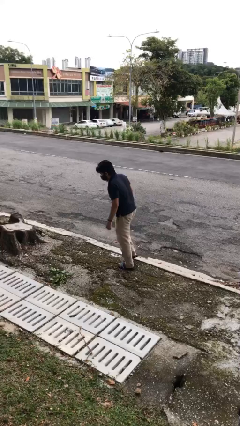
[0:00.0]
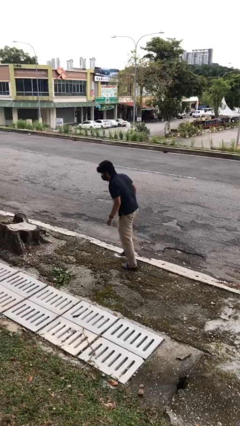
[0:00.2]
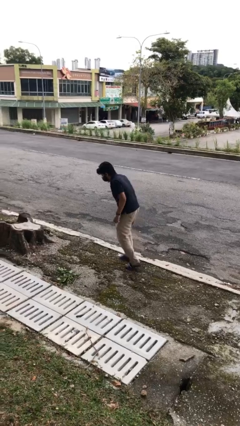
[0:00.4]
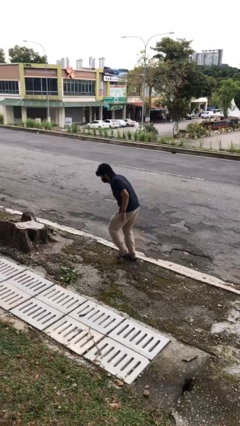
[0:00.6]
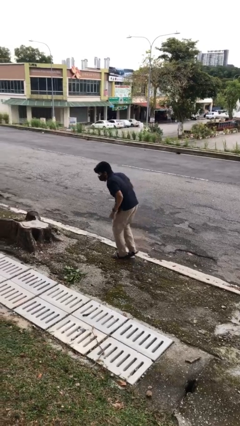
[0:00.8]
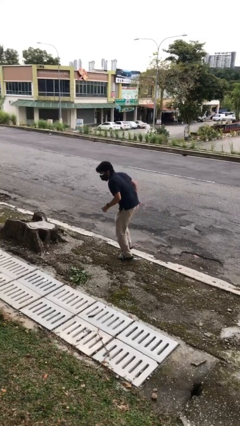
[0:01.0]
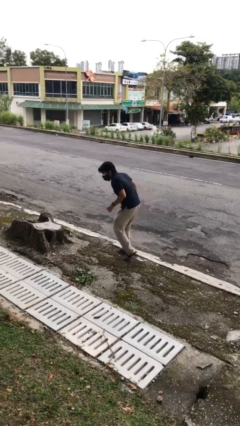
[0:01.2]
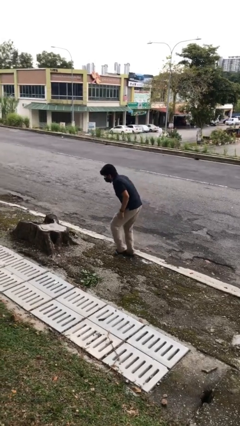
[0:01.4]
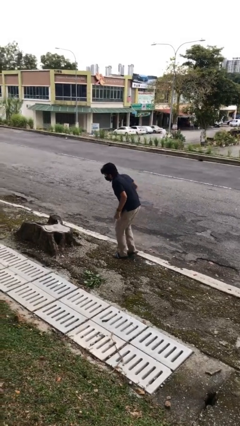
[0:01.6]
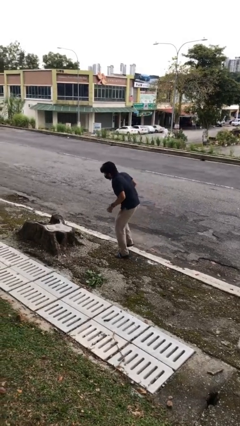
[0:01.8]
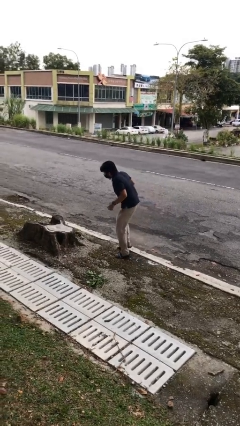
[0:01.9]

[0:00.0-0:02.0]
person walks tiptoe

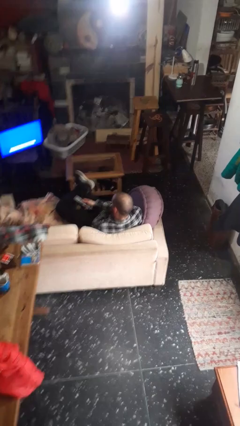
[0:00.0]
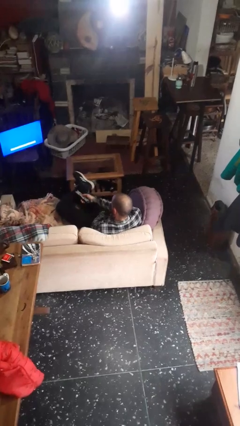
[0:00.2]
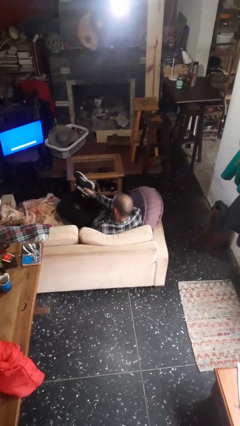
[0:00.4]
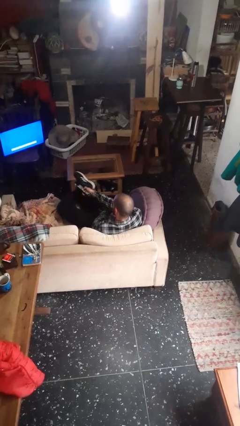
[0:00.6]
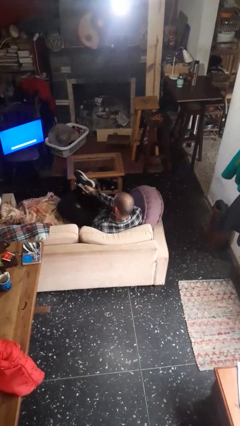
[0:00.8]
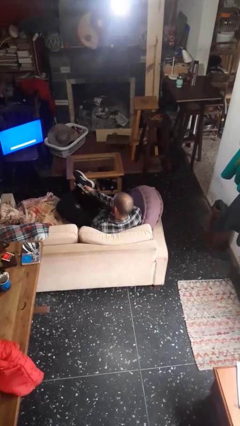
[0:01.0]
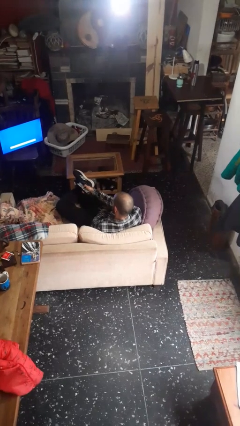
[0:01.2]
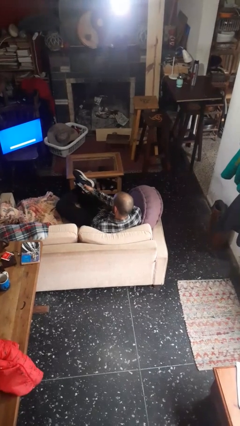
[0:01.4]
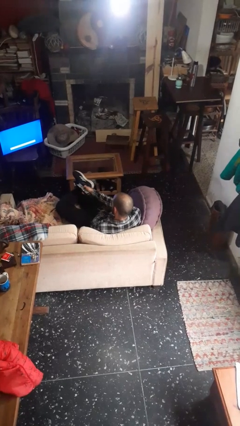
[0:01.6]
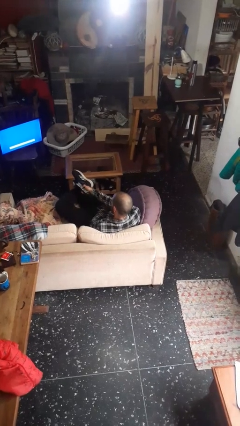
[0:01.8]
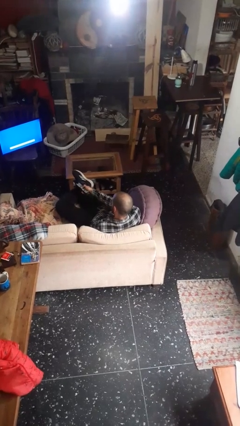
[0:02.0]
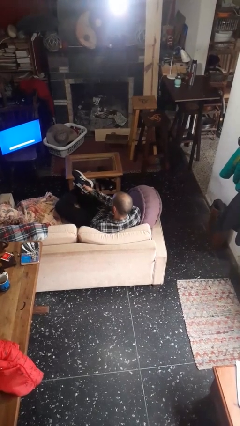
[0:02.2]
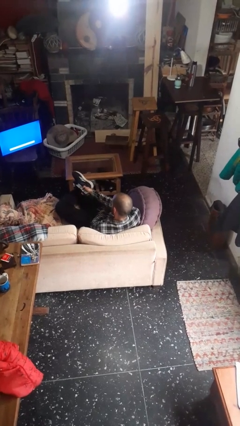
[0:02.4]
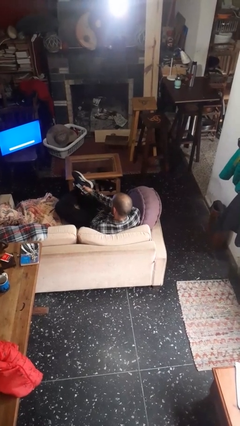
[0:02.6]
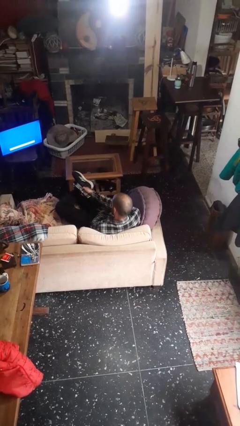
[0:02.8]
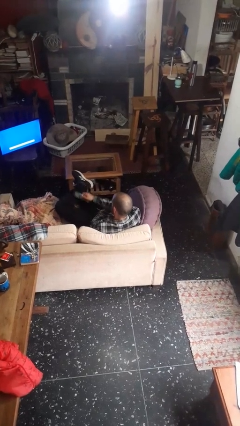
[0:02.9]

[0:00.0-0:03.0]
person uses television remote

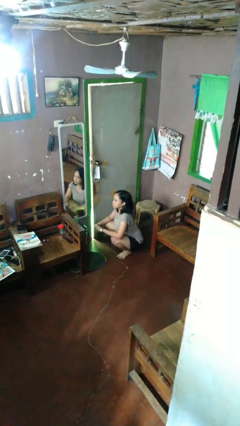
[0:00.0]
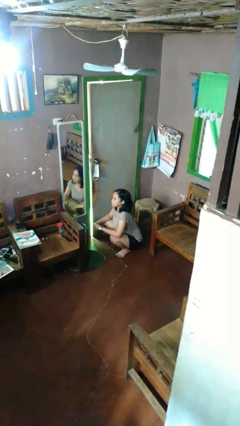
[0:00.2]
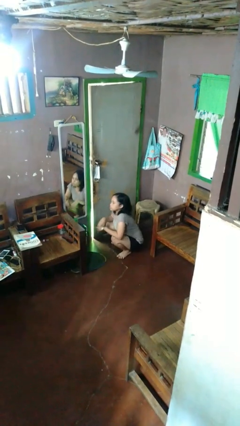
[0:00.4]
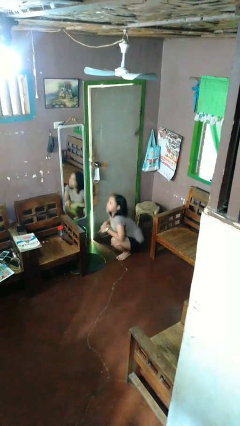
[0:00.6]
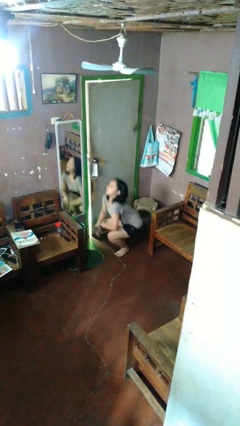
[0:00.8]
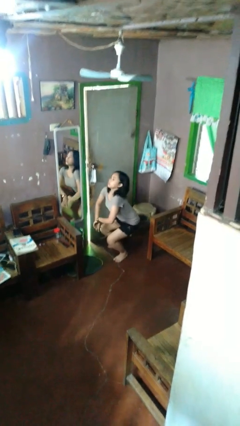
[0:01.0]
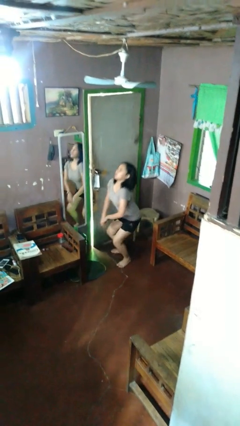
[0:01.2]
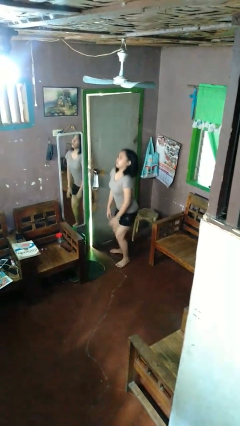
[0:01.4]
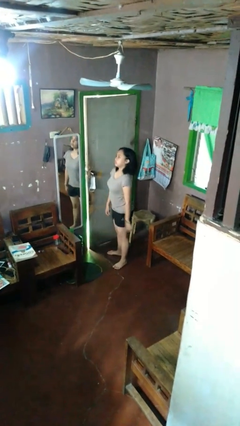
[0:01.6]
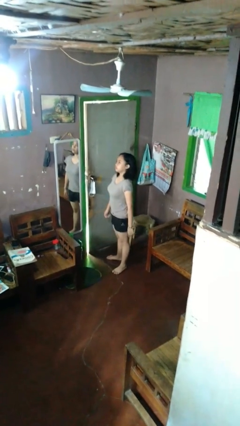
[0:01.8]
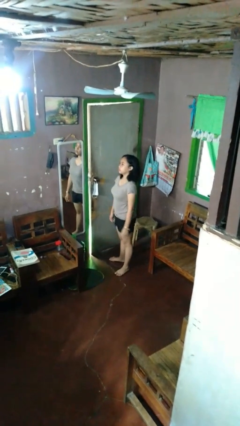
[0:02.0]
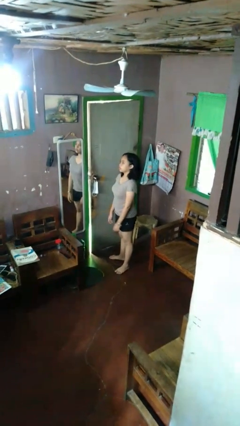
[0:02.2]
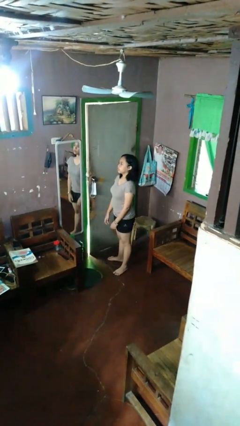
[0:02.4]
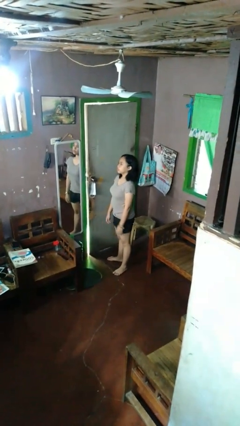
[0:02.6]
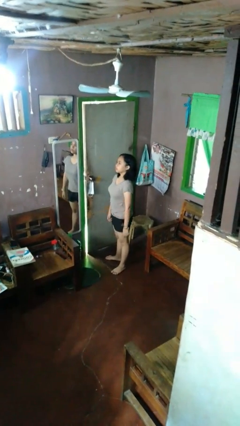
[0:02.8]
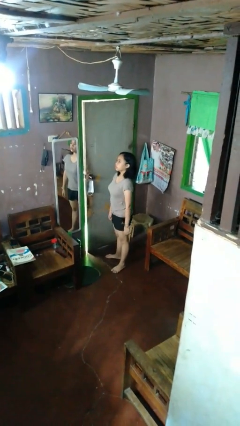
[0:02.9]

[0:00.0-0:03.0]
person stands up

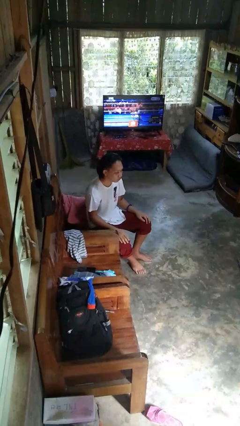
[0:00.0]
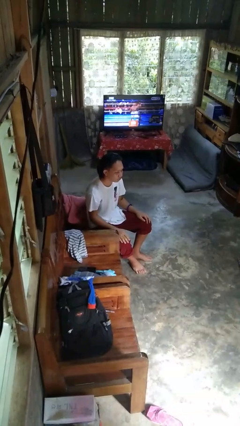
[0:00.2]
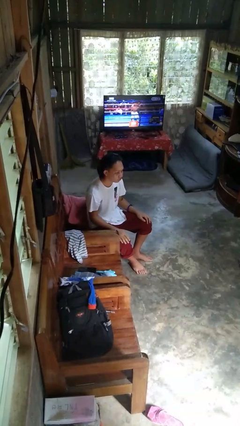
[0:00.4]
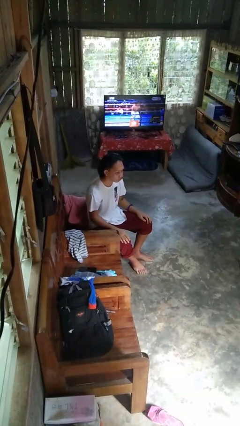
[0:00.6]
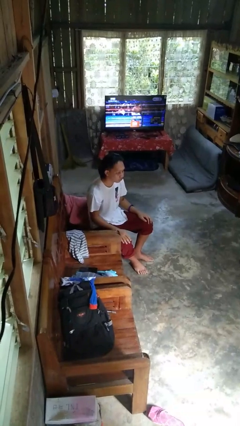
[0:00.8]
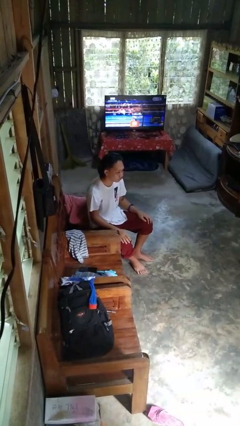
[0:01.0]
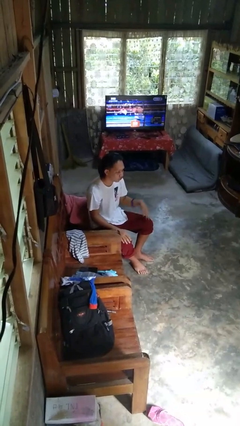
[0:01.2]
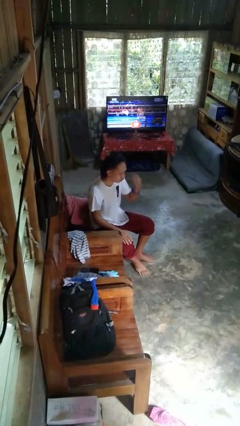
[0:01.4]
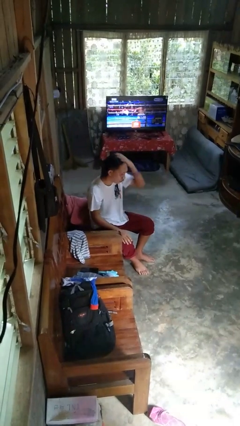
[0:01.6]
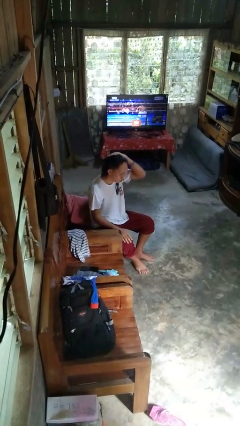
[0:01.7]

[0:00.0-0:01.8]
person strokes hair

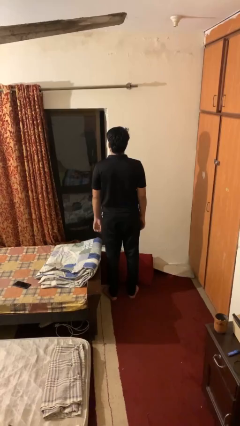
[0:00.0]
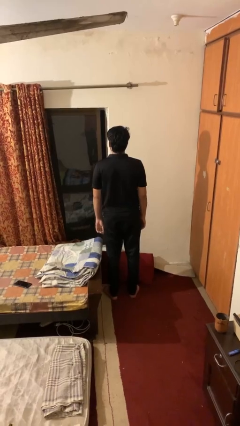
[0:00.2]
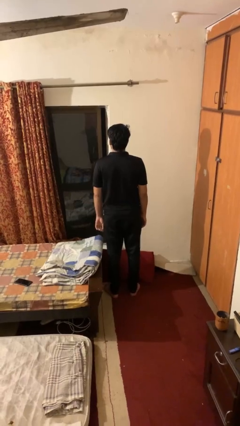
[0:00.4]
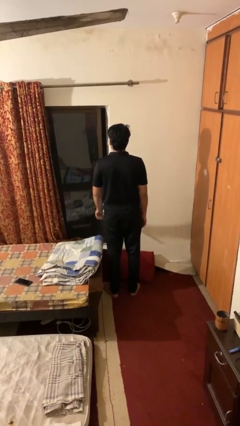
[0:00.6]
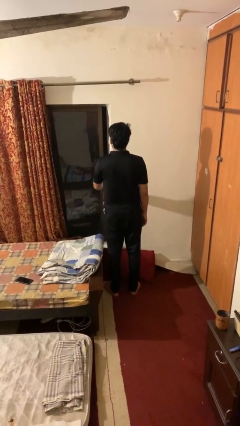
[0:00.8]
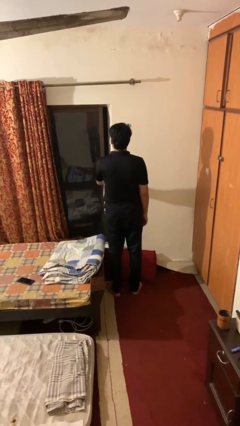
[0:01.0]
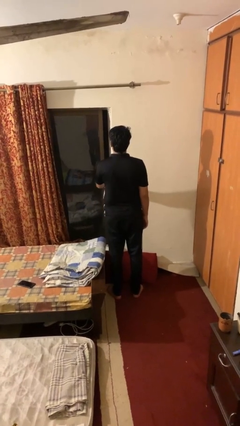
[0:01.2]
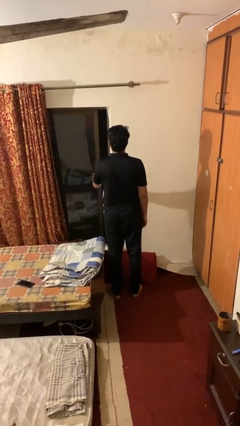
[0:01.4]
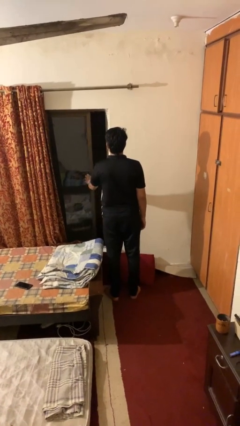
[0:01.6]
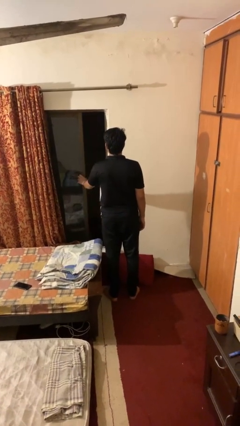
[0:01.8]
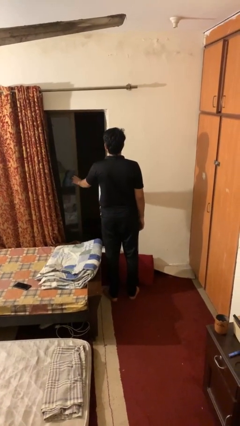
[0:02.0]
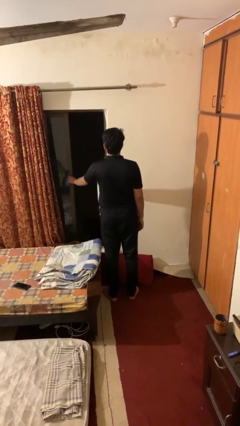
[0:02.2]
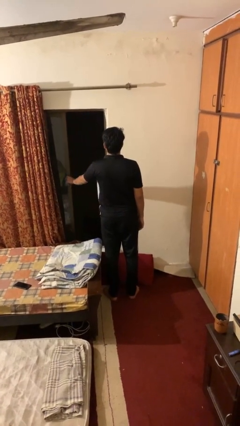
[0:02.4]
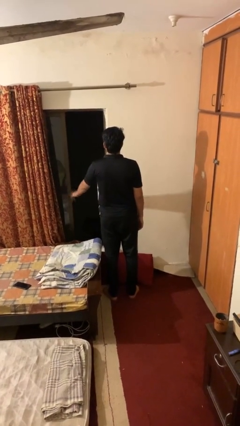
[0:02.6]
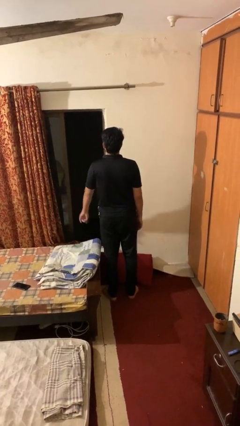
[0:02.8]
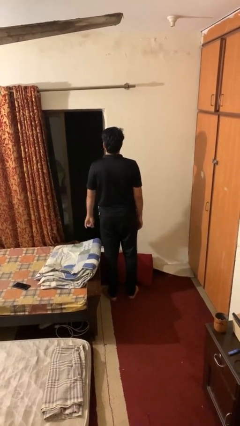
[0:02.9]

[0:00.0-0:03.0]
person opens home window

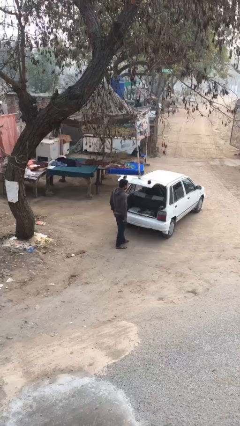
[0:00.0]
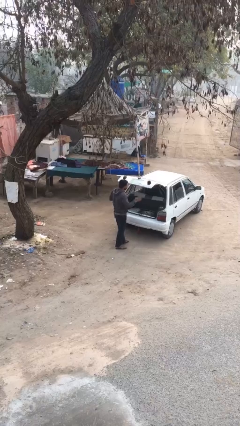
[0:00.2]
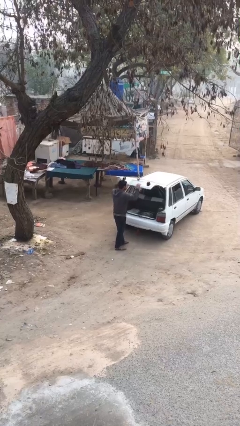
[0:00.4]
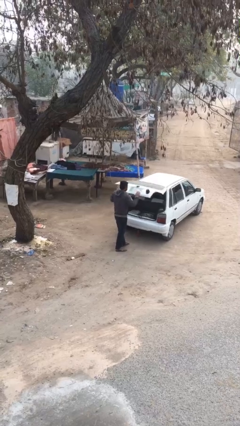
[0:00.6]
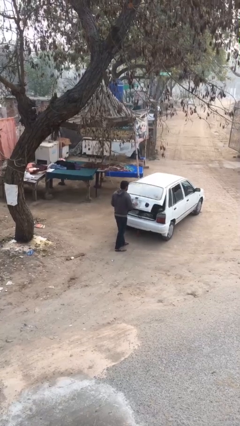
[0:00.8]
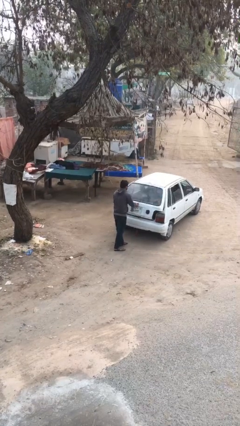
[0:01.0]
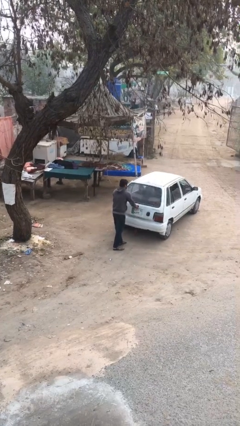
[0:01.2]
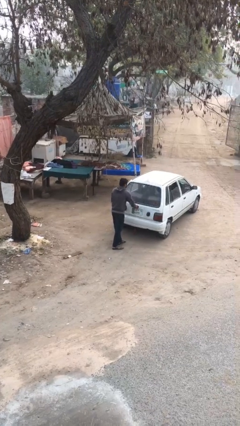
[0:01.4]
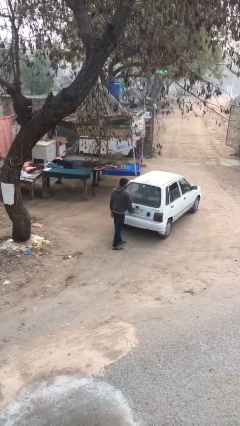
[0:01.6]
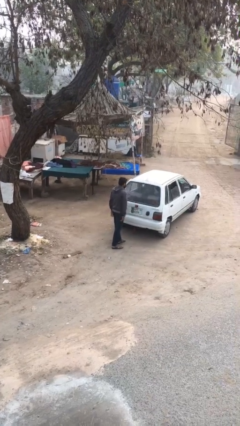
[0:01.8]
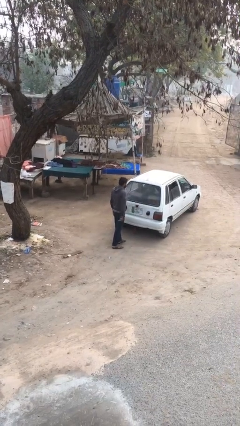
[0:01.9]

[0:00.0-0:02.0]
person closes car trunk

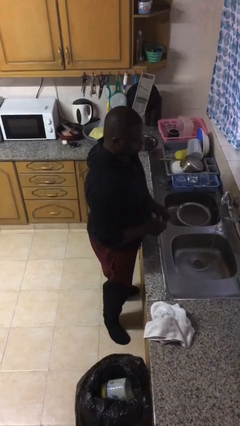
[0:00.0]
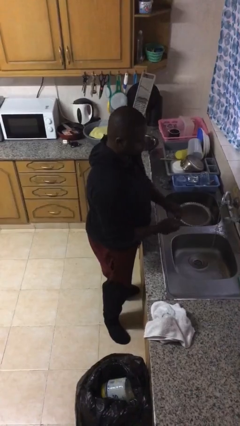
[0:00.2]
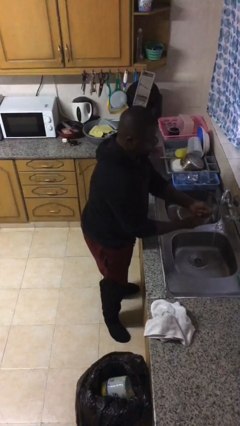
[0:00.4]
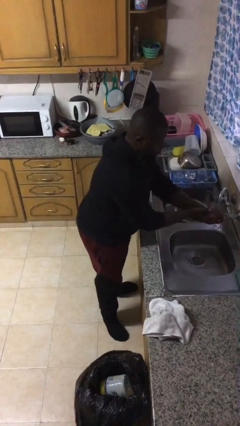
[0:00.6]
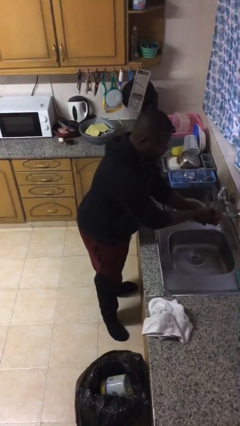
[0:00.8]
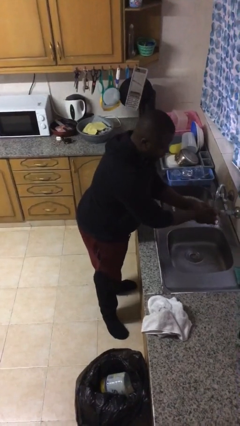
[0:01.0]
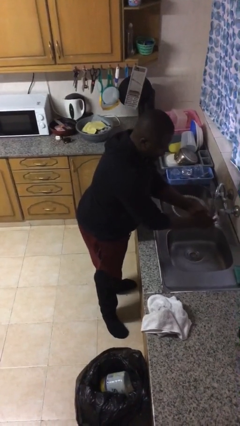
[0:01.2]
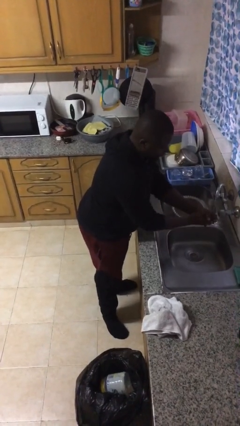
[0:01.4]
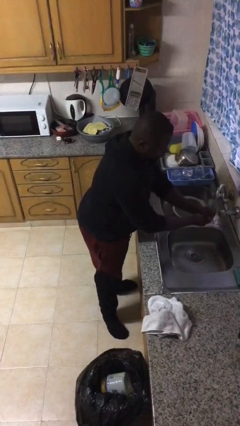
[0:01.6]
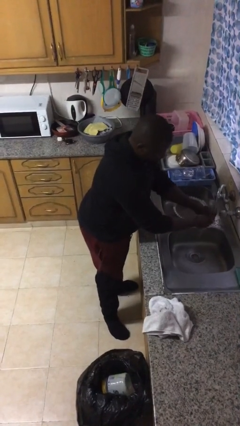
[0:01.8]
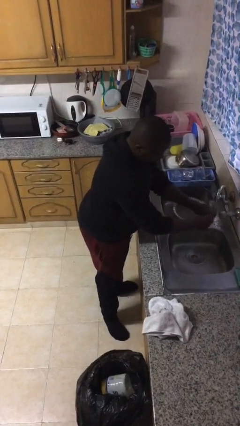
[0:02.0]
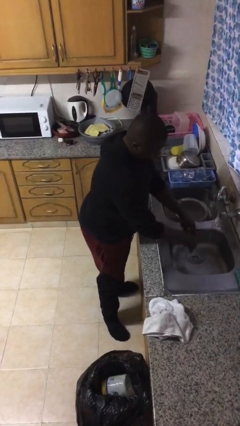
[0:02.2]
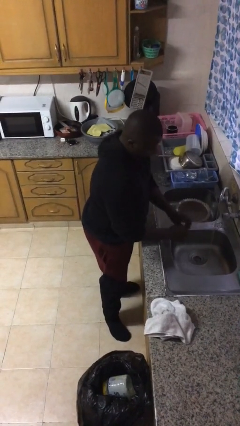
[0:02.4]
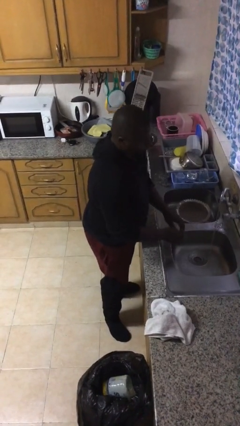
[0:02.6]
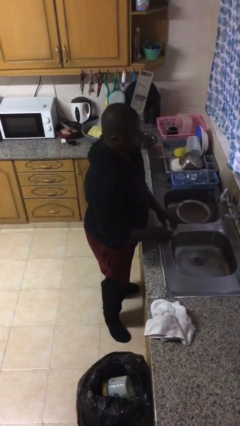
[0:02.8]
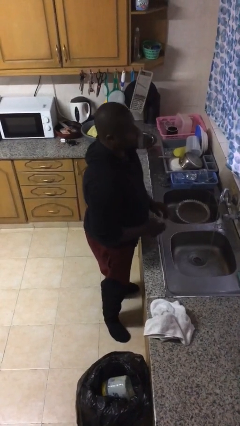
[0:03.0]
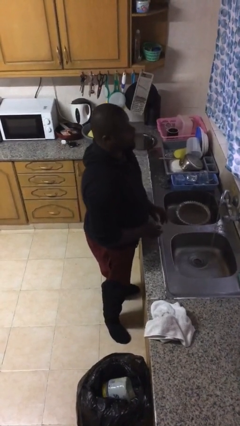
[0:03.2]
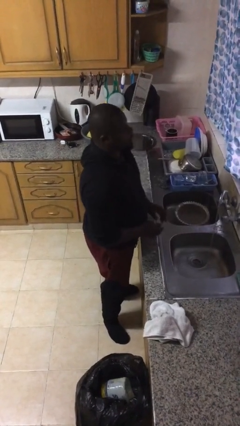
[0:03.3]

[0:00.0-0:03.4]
person washes hands
